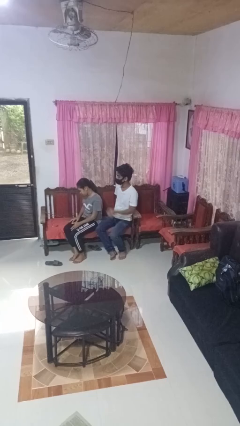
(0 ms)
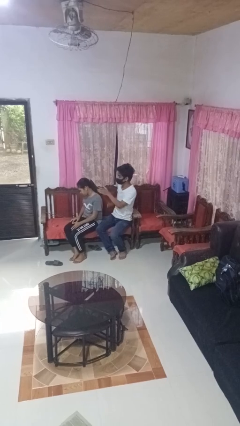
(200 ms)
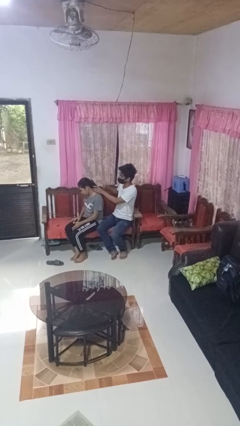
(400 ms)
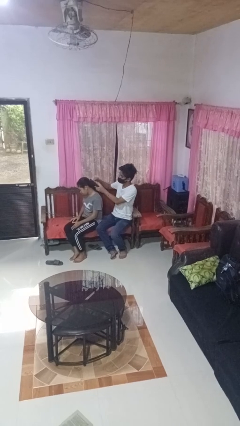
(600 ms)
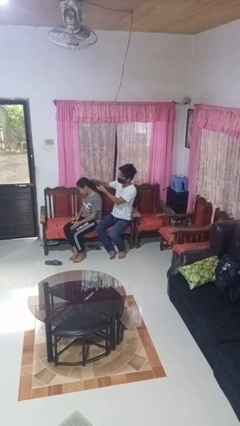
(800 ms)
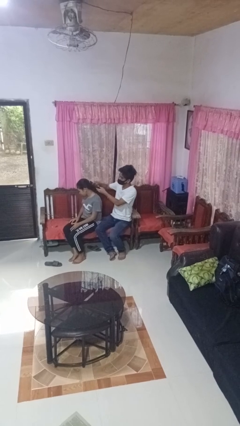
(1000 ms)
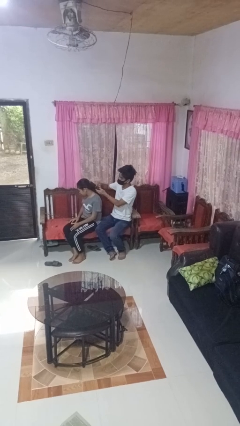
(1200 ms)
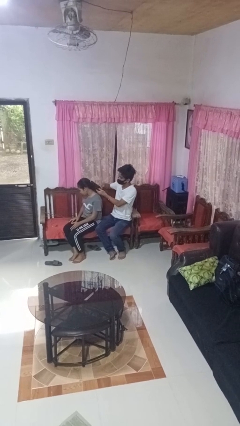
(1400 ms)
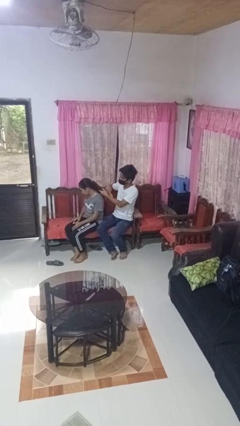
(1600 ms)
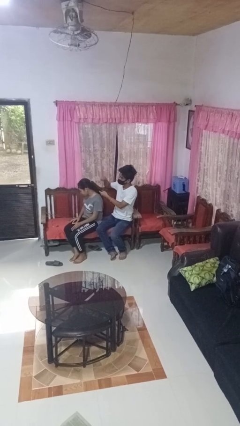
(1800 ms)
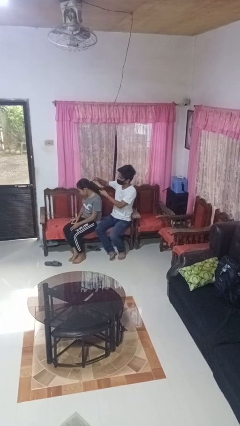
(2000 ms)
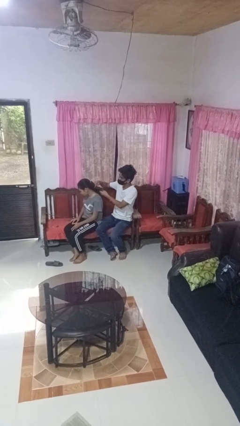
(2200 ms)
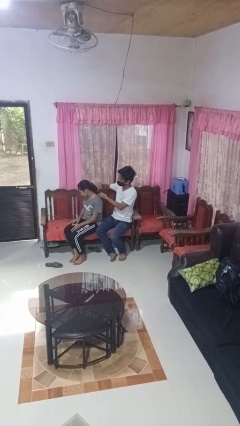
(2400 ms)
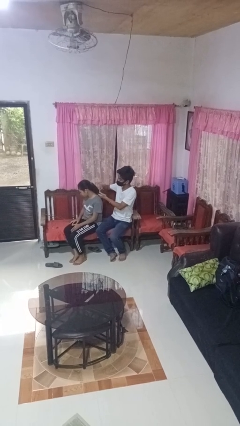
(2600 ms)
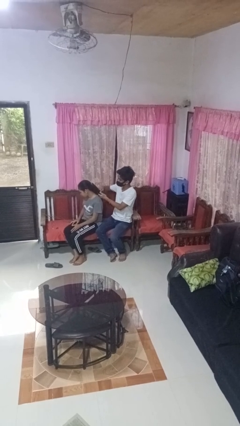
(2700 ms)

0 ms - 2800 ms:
person brushes hair of person

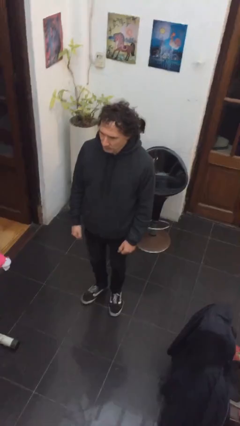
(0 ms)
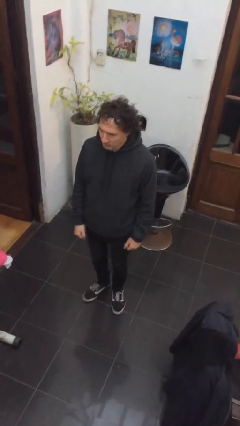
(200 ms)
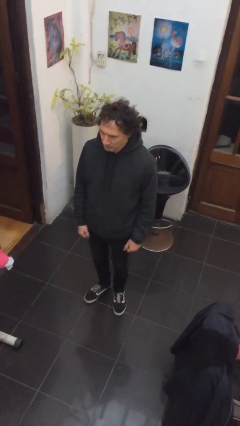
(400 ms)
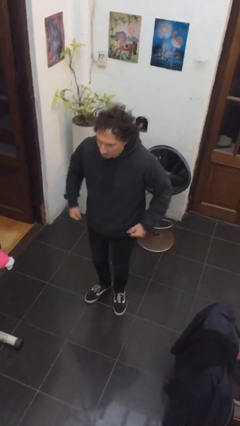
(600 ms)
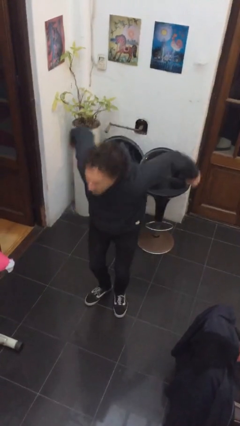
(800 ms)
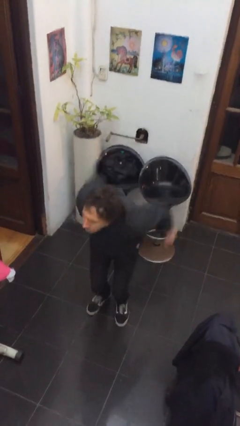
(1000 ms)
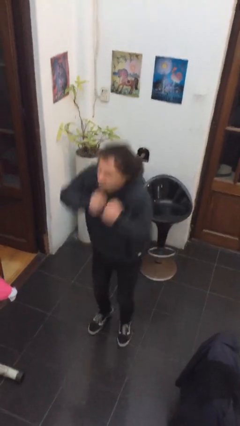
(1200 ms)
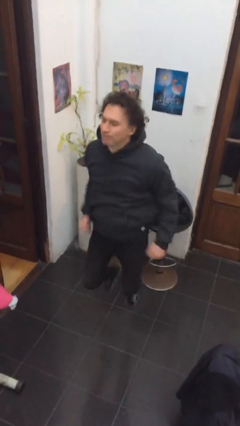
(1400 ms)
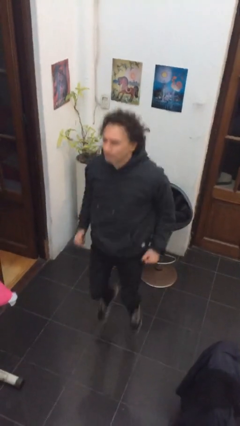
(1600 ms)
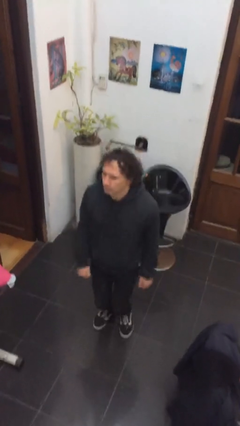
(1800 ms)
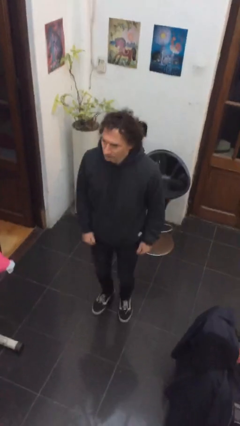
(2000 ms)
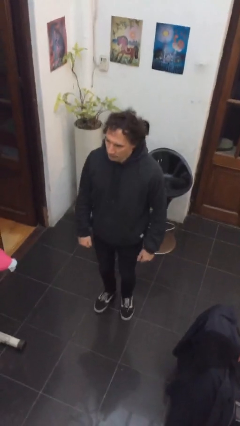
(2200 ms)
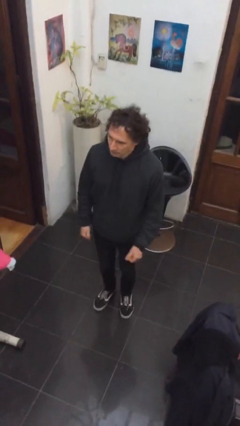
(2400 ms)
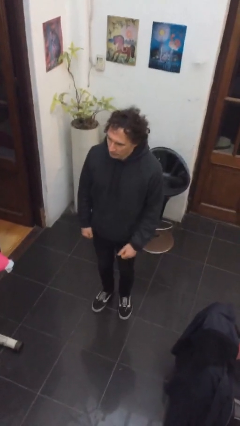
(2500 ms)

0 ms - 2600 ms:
person jumps

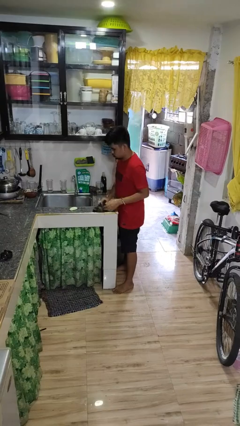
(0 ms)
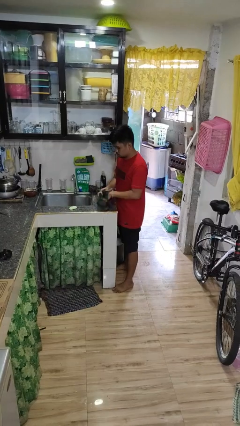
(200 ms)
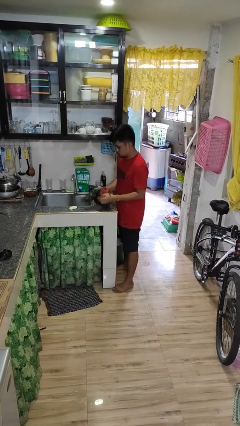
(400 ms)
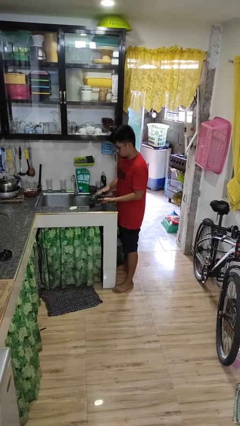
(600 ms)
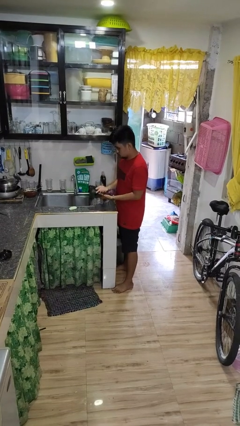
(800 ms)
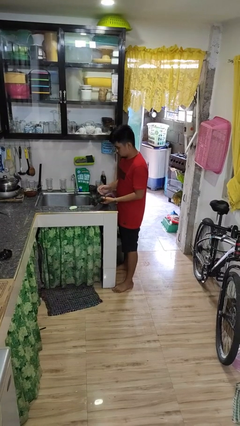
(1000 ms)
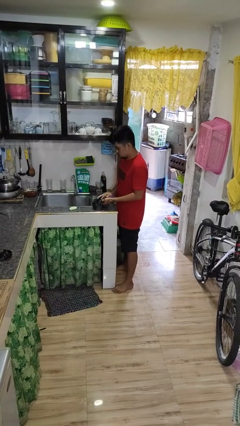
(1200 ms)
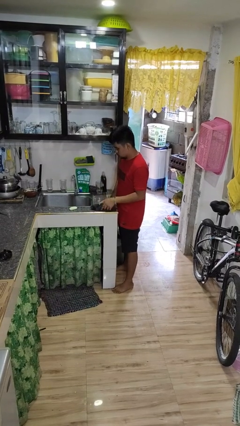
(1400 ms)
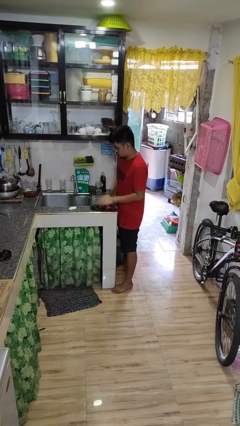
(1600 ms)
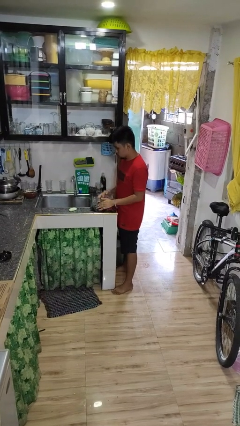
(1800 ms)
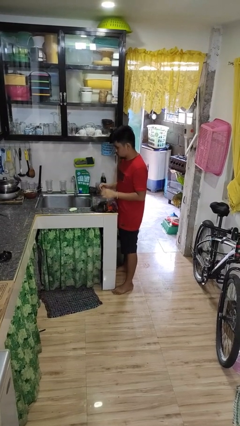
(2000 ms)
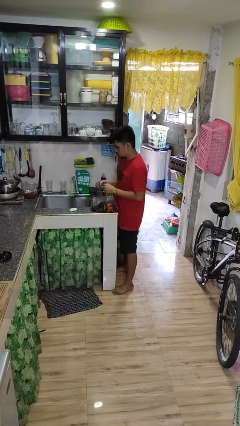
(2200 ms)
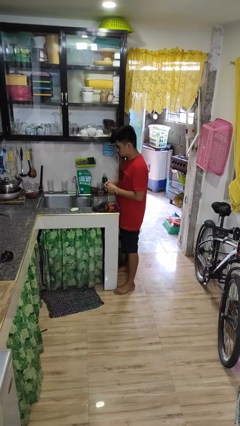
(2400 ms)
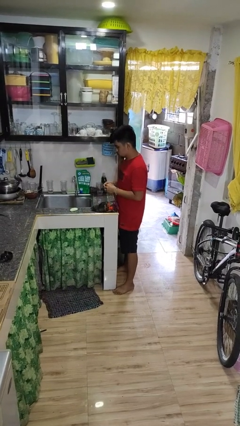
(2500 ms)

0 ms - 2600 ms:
person dries hands with towel

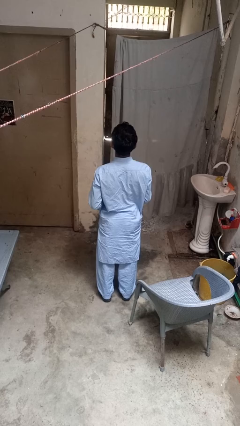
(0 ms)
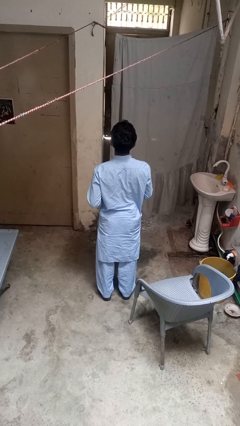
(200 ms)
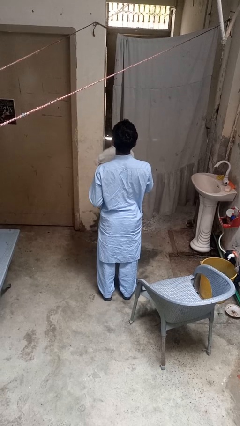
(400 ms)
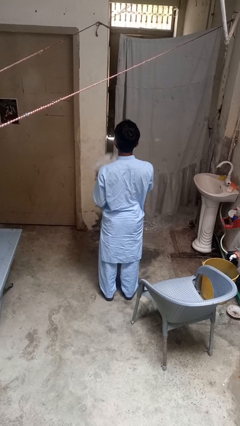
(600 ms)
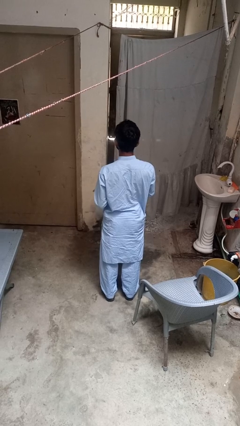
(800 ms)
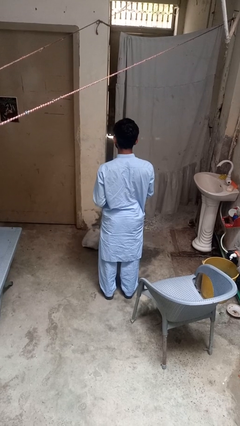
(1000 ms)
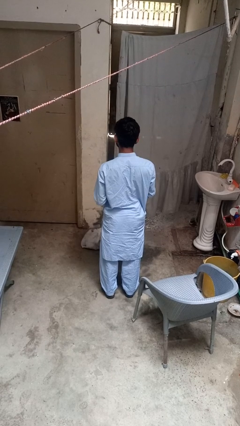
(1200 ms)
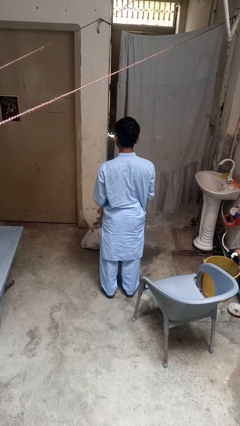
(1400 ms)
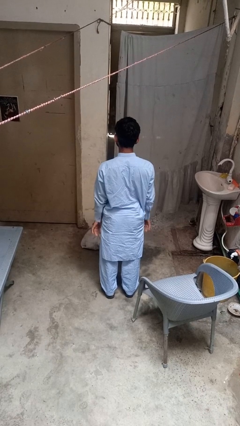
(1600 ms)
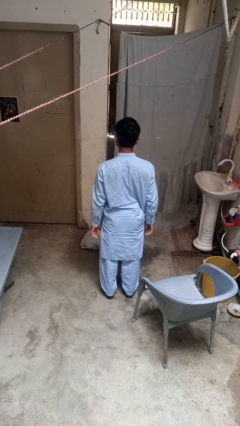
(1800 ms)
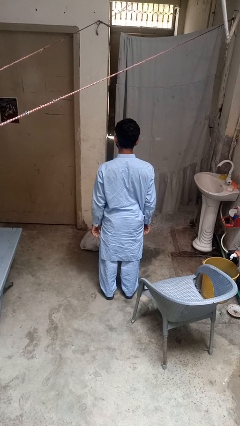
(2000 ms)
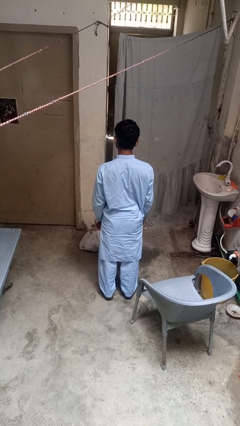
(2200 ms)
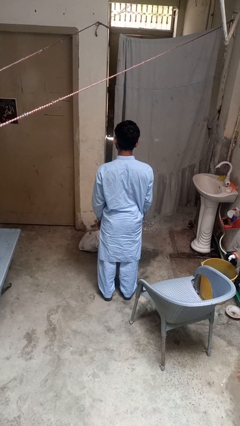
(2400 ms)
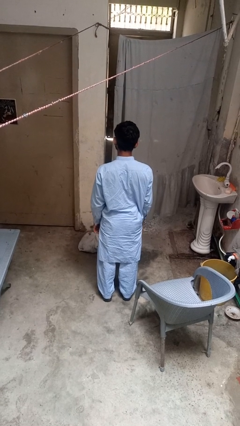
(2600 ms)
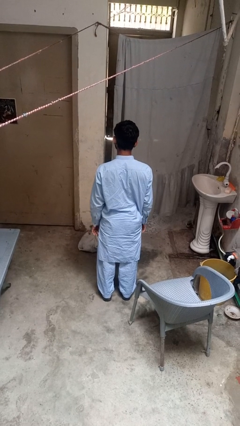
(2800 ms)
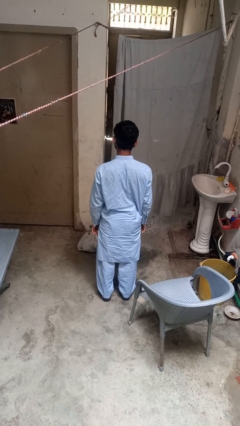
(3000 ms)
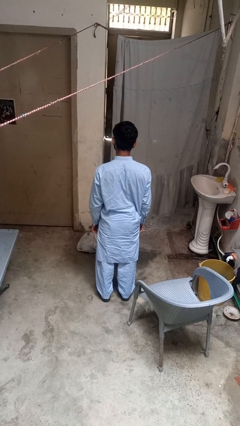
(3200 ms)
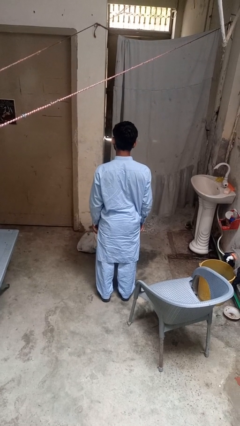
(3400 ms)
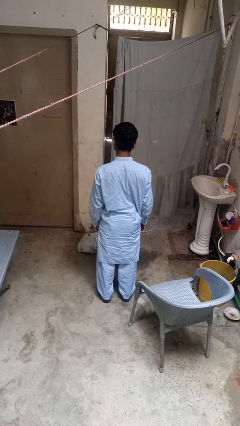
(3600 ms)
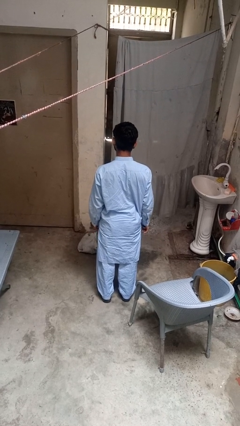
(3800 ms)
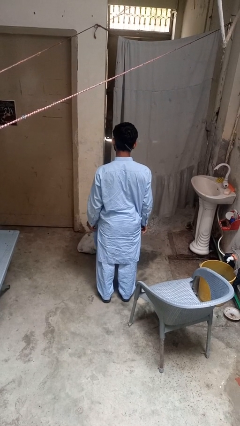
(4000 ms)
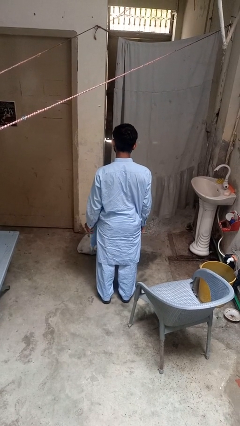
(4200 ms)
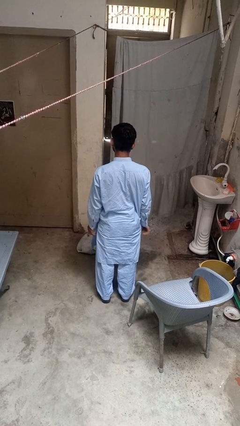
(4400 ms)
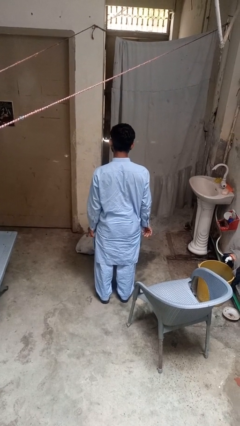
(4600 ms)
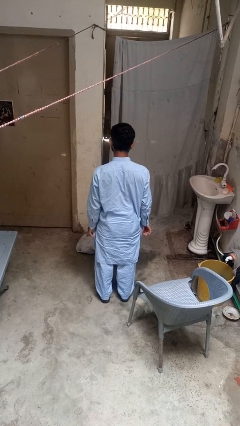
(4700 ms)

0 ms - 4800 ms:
person throws object to ground

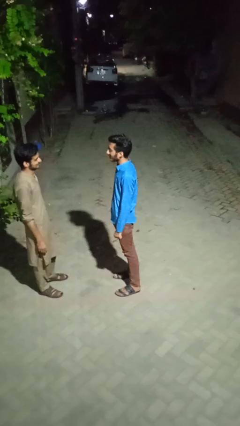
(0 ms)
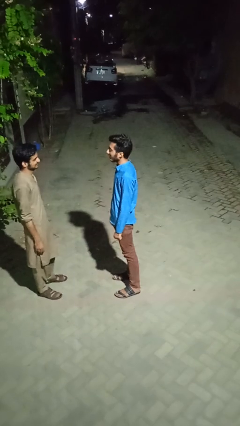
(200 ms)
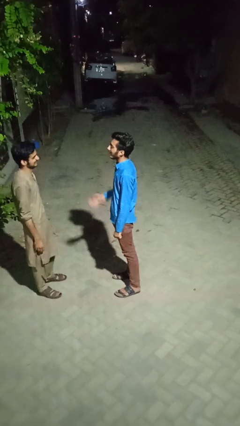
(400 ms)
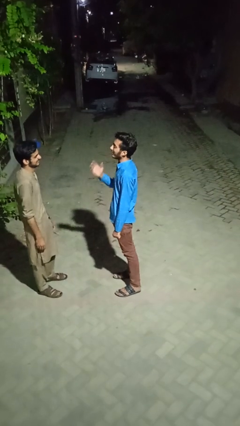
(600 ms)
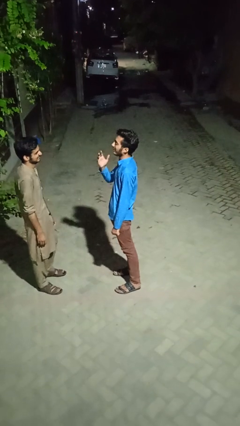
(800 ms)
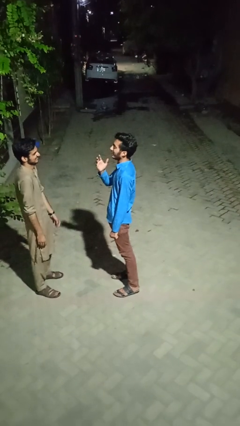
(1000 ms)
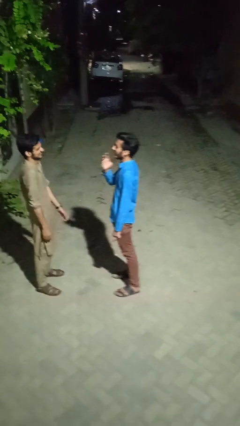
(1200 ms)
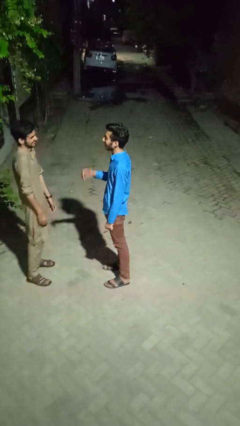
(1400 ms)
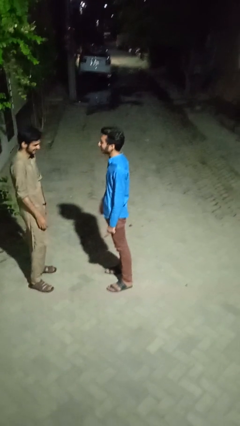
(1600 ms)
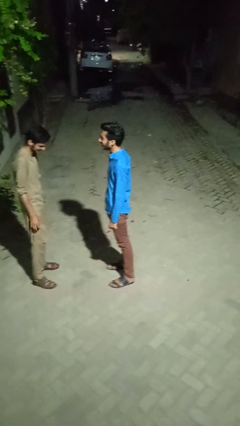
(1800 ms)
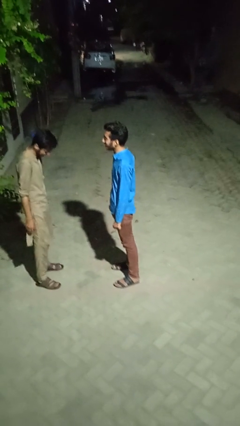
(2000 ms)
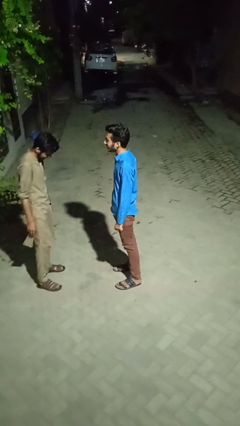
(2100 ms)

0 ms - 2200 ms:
person laughs with person

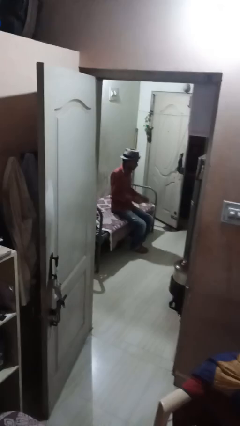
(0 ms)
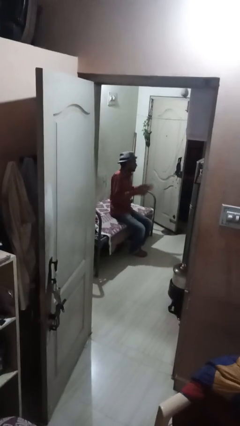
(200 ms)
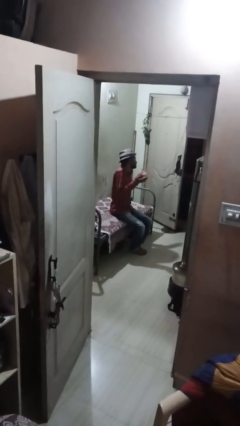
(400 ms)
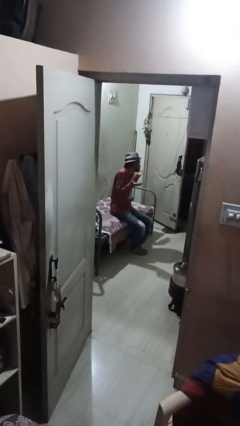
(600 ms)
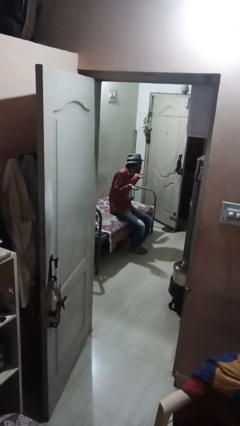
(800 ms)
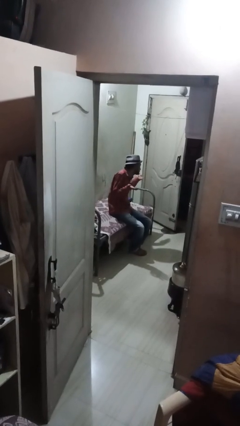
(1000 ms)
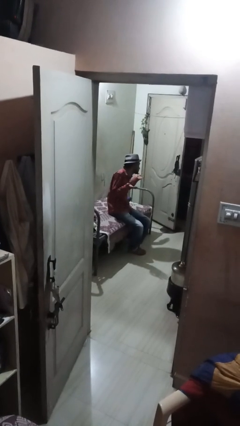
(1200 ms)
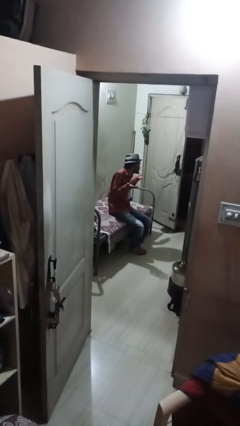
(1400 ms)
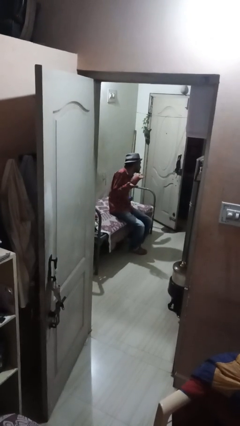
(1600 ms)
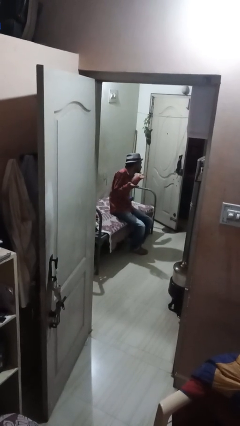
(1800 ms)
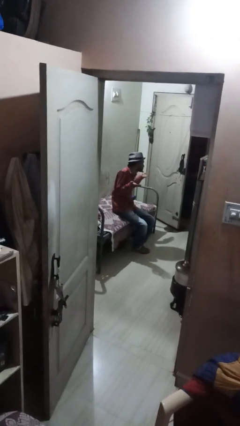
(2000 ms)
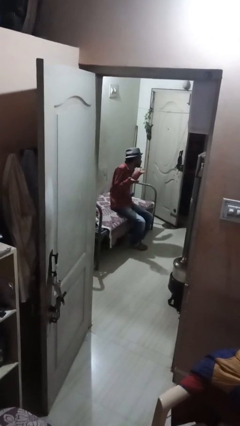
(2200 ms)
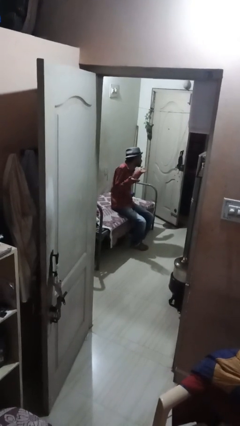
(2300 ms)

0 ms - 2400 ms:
person shrugs
